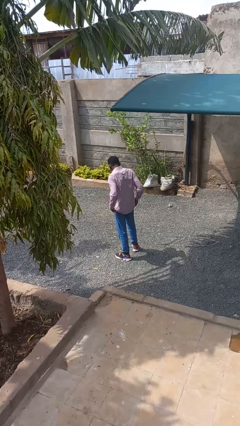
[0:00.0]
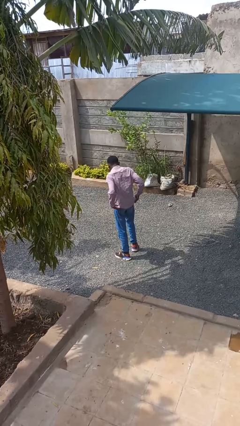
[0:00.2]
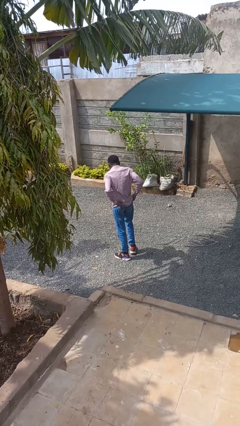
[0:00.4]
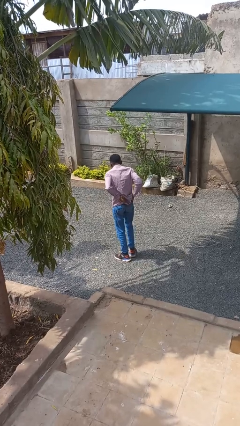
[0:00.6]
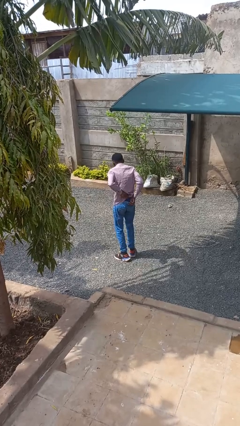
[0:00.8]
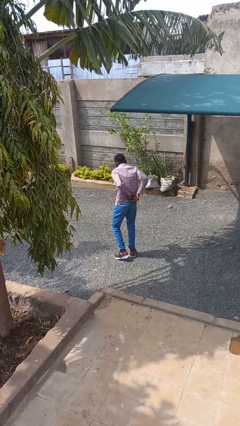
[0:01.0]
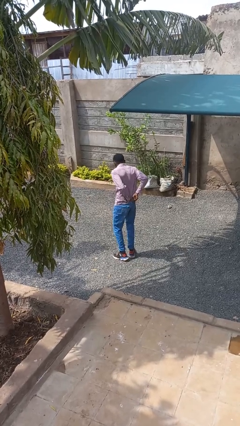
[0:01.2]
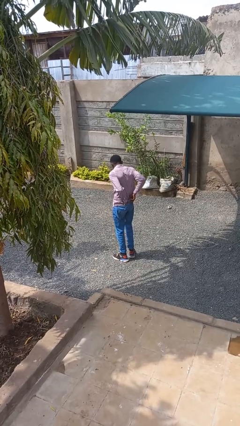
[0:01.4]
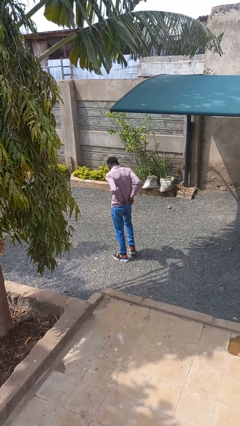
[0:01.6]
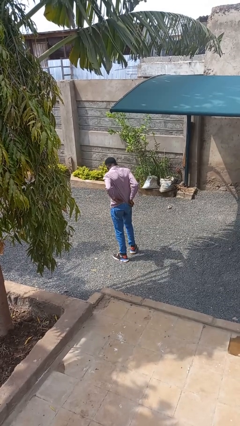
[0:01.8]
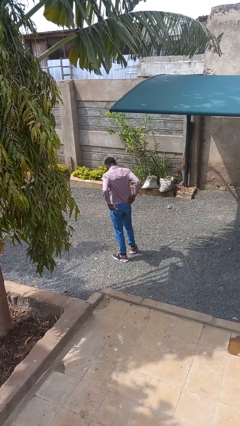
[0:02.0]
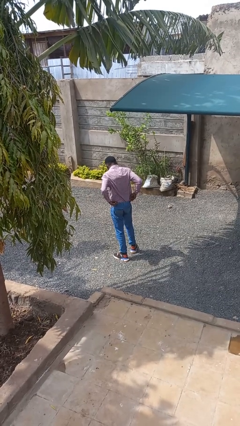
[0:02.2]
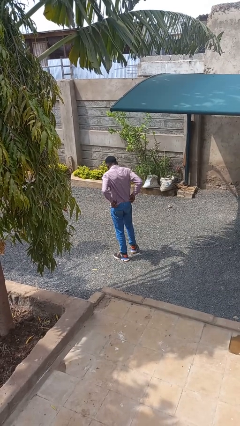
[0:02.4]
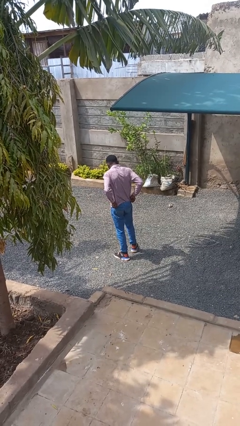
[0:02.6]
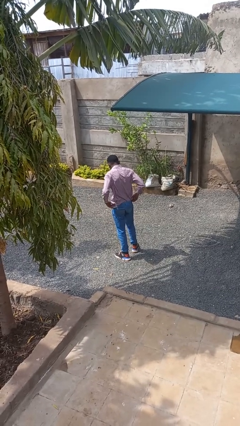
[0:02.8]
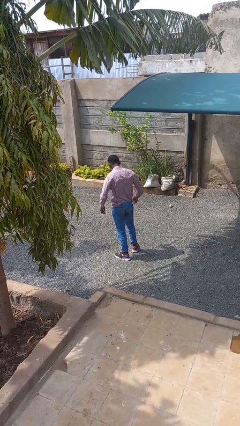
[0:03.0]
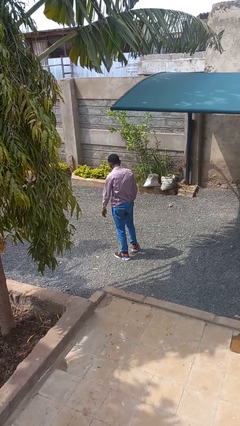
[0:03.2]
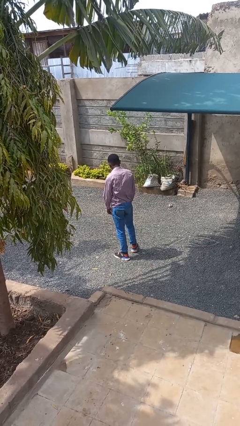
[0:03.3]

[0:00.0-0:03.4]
person tucks in shirt

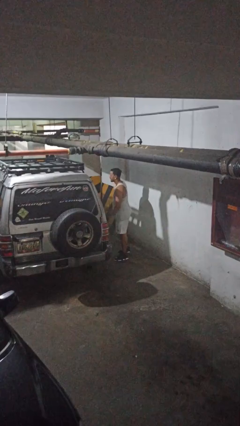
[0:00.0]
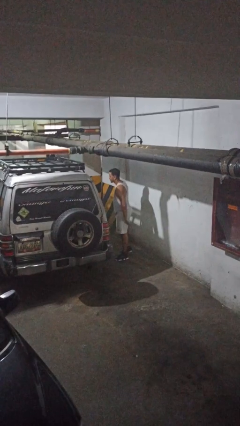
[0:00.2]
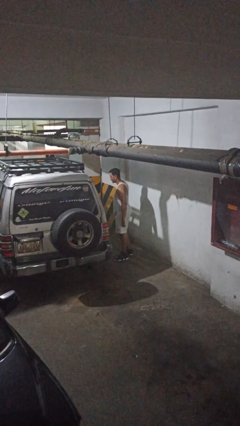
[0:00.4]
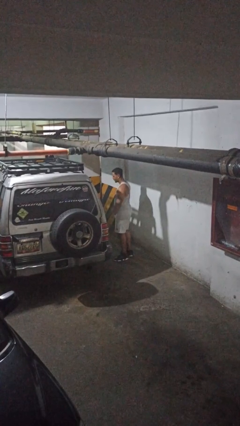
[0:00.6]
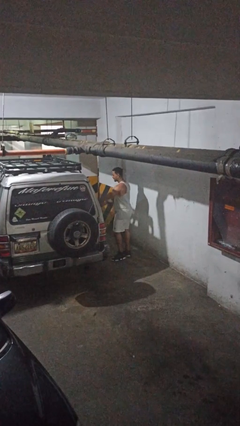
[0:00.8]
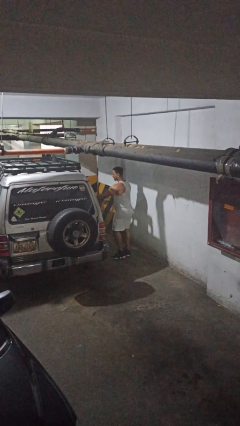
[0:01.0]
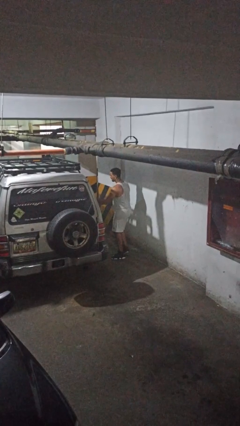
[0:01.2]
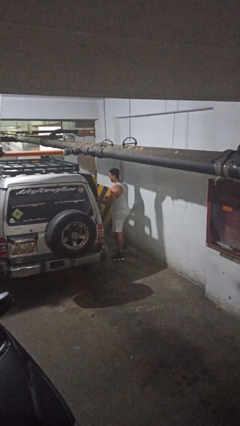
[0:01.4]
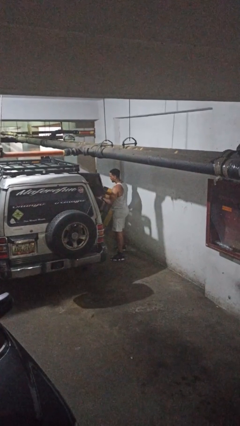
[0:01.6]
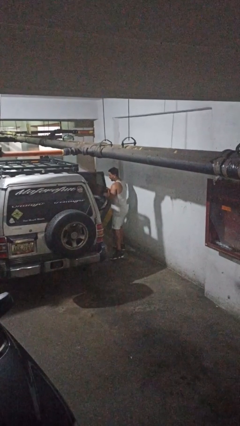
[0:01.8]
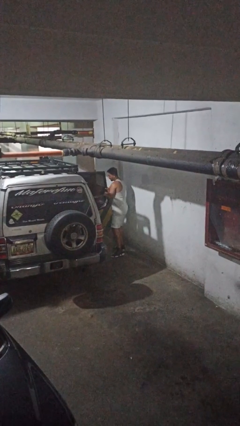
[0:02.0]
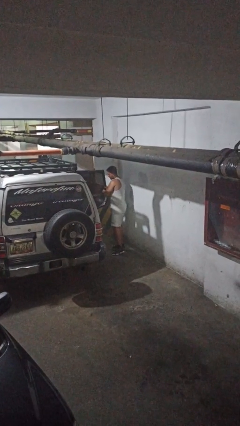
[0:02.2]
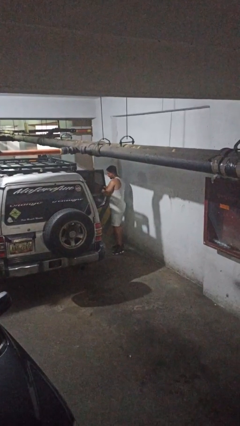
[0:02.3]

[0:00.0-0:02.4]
person opens car door

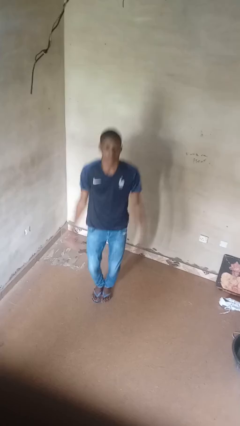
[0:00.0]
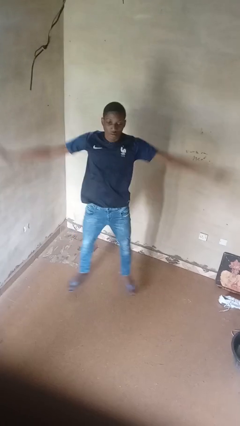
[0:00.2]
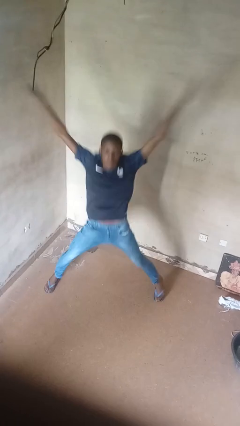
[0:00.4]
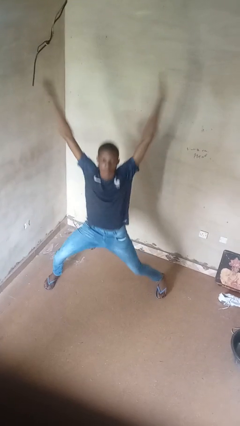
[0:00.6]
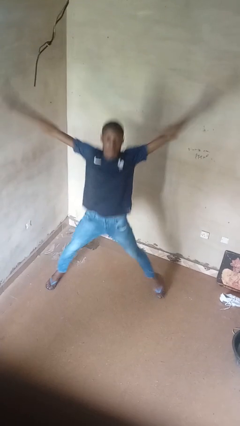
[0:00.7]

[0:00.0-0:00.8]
person exercises with jumping jacks

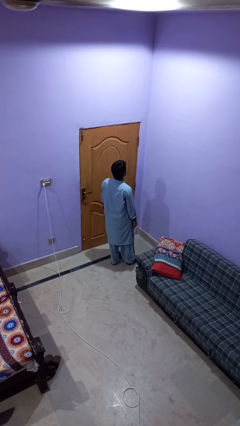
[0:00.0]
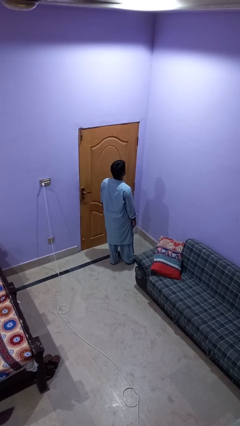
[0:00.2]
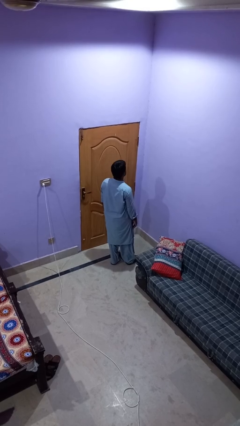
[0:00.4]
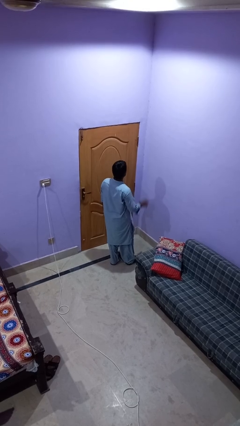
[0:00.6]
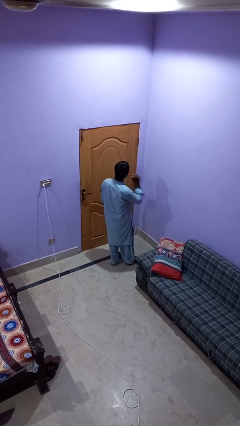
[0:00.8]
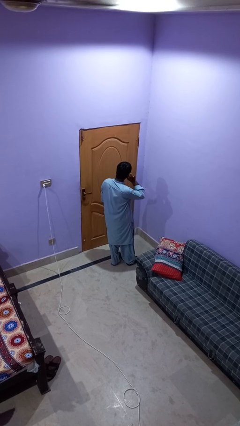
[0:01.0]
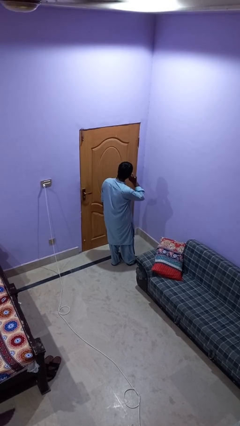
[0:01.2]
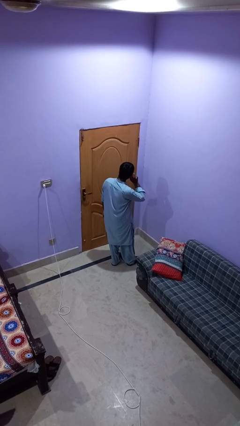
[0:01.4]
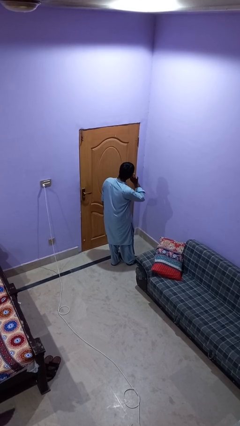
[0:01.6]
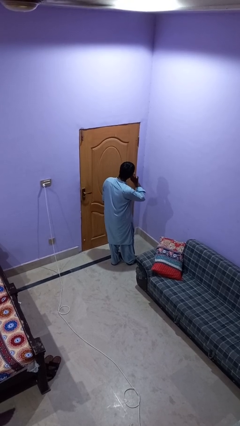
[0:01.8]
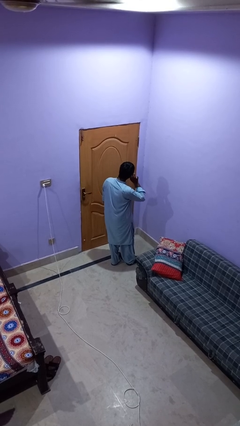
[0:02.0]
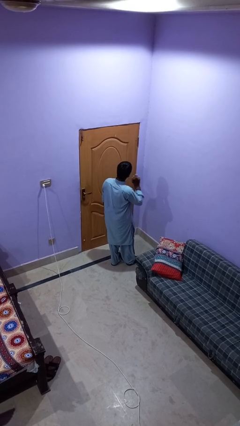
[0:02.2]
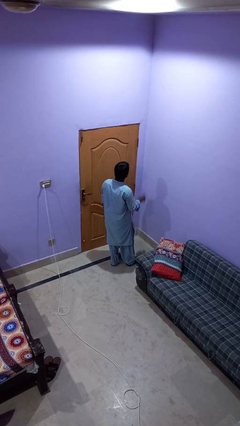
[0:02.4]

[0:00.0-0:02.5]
person gestures listen closely

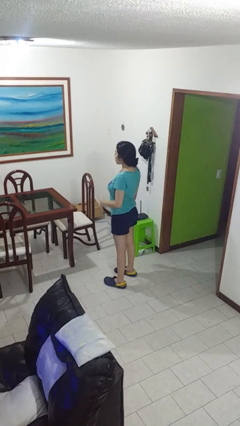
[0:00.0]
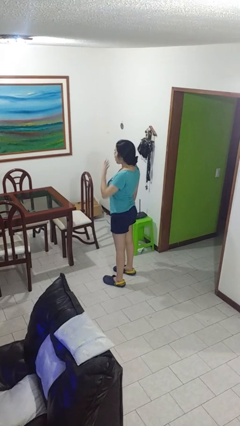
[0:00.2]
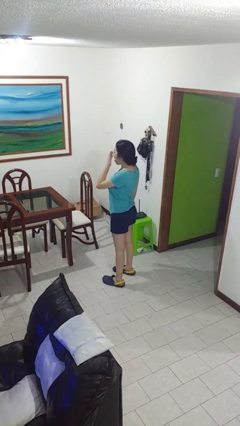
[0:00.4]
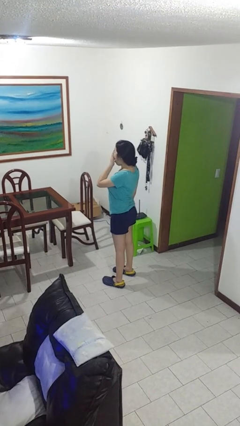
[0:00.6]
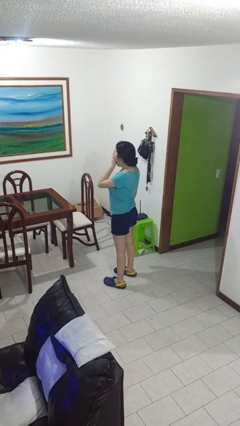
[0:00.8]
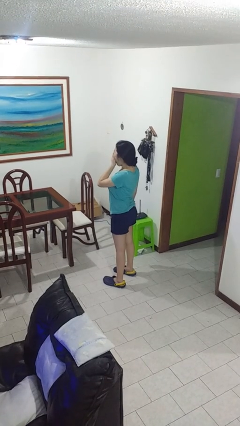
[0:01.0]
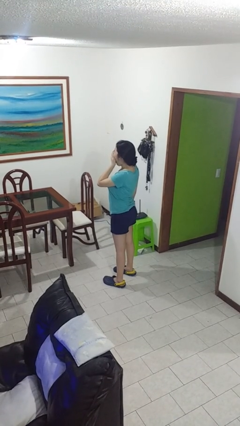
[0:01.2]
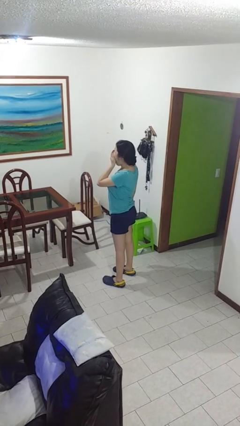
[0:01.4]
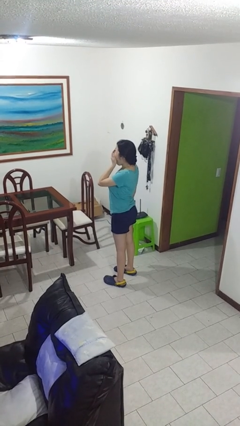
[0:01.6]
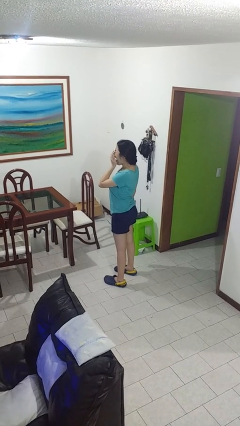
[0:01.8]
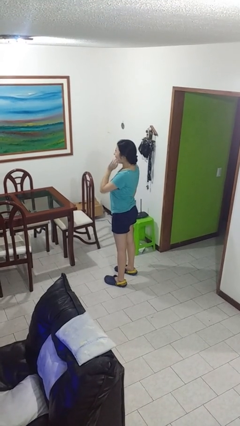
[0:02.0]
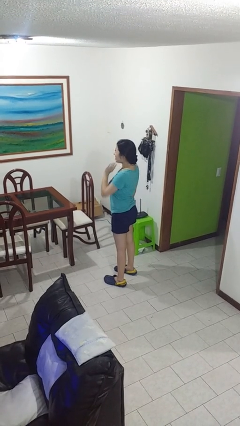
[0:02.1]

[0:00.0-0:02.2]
person yawns

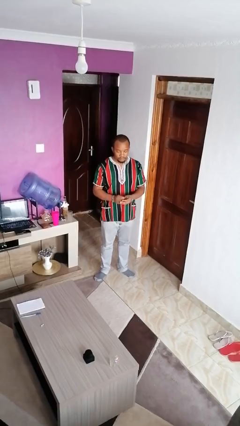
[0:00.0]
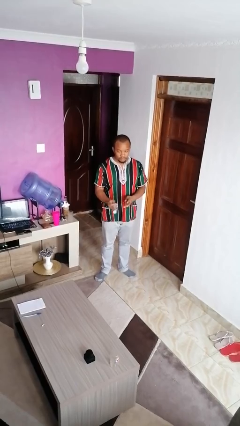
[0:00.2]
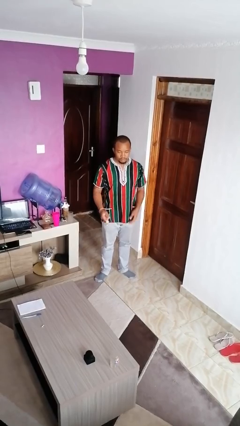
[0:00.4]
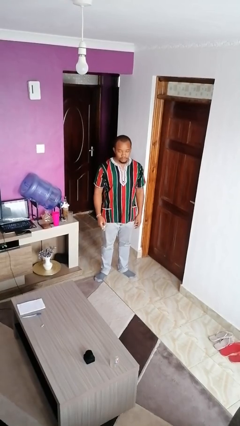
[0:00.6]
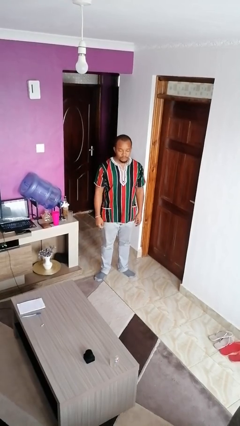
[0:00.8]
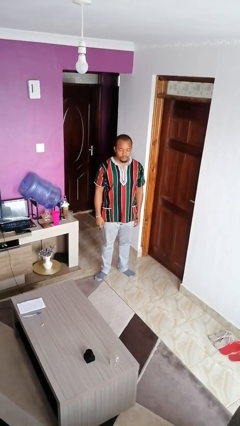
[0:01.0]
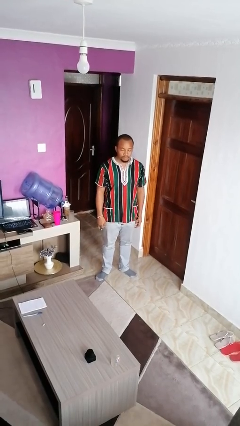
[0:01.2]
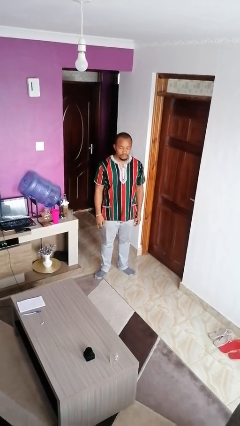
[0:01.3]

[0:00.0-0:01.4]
person takes off wristwatch

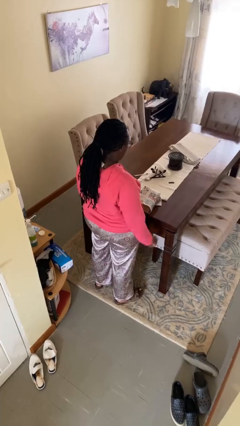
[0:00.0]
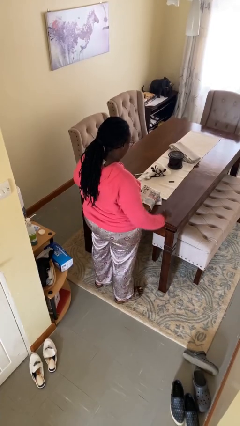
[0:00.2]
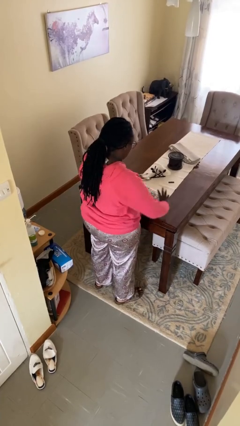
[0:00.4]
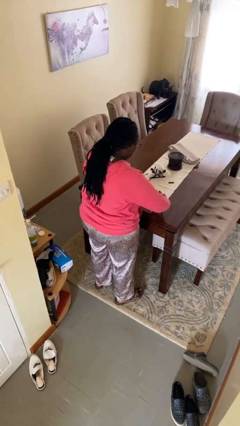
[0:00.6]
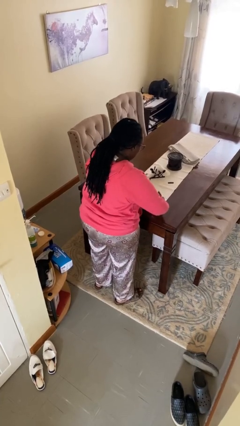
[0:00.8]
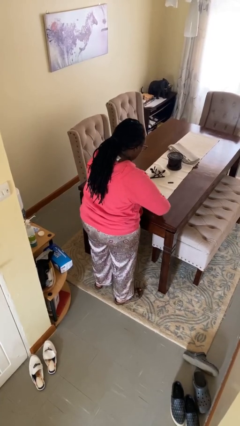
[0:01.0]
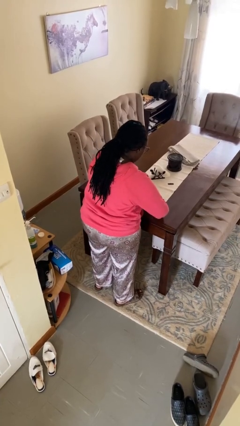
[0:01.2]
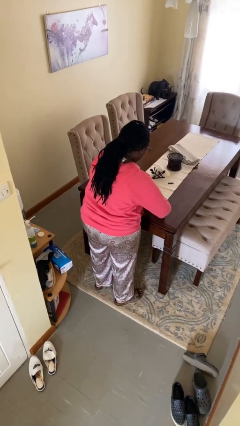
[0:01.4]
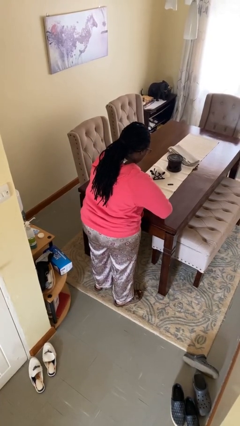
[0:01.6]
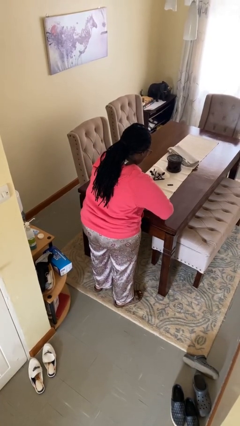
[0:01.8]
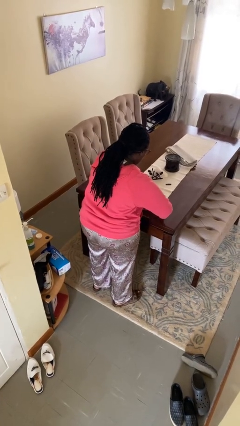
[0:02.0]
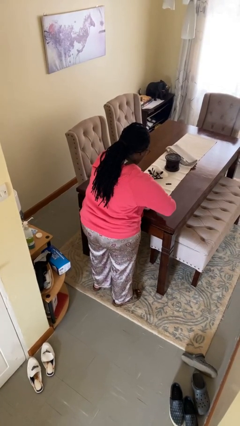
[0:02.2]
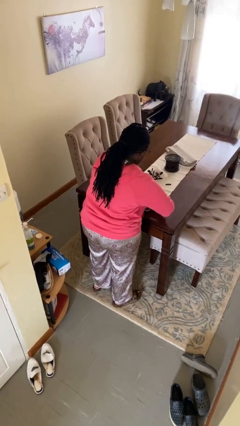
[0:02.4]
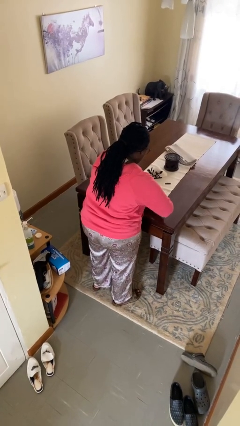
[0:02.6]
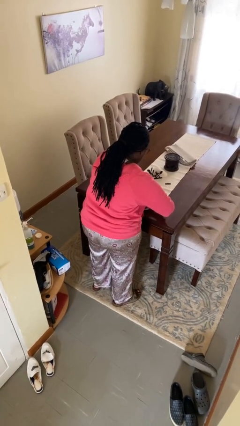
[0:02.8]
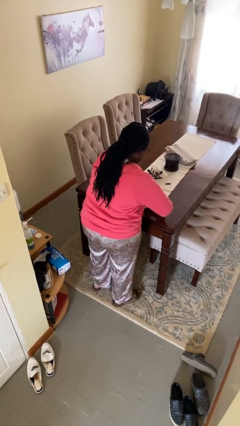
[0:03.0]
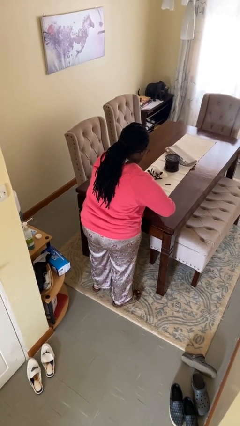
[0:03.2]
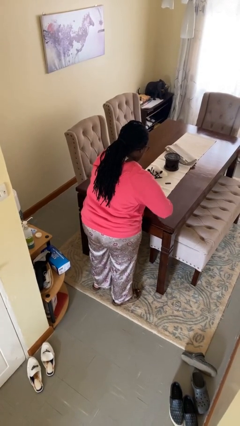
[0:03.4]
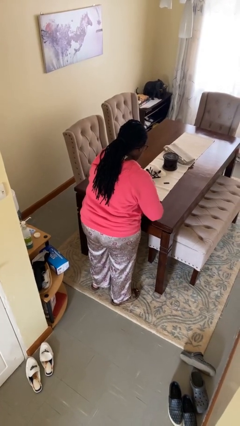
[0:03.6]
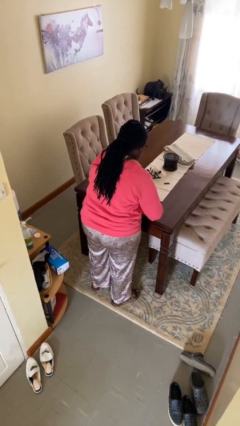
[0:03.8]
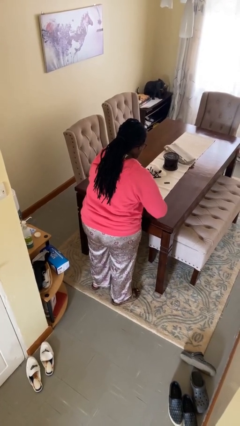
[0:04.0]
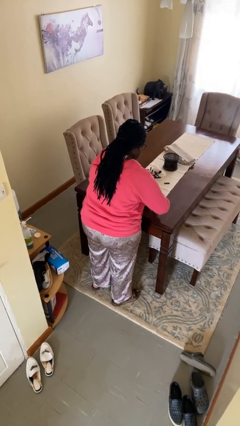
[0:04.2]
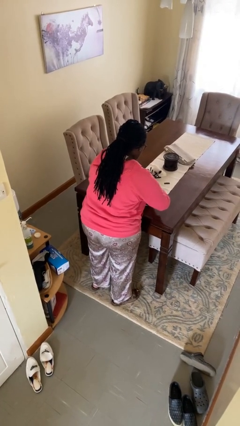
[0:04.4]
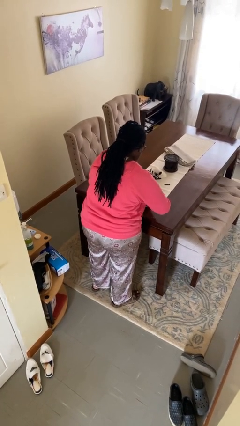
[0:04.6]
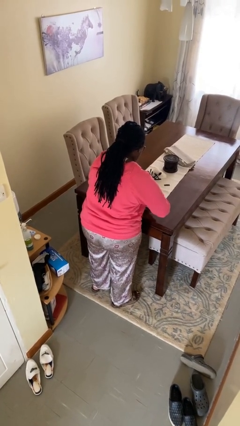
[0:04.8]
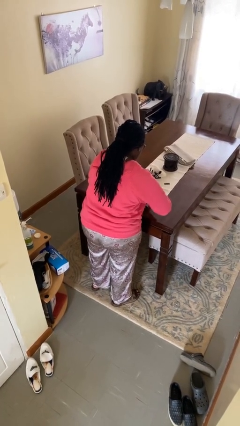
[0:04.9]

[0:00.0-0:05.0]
person wraps box
